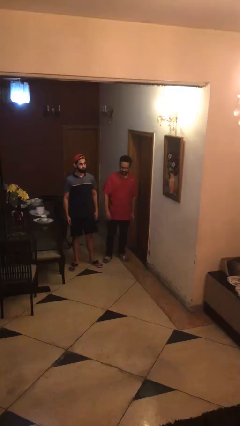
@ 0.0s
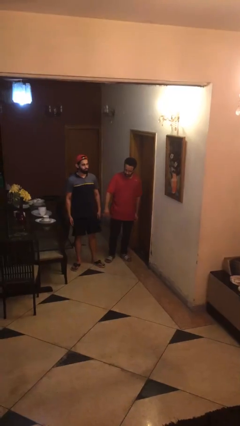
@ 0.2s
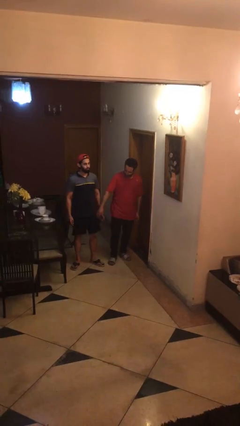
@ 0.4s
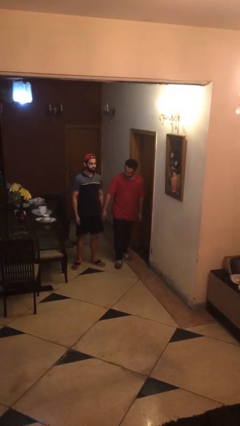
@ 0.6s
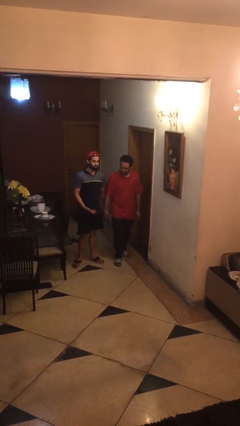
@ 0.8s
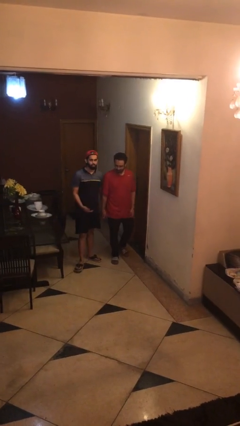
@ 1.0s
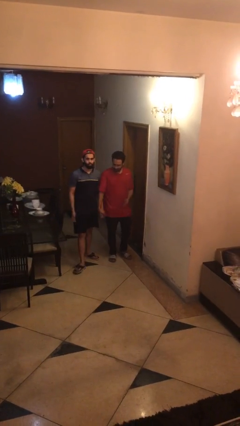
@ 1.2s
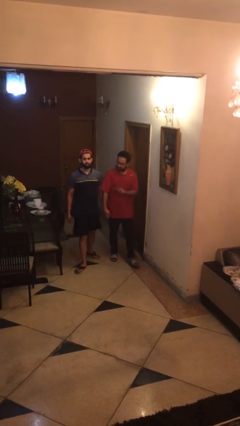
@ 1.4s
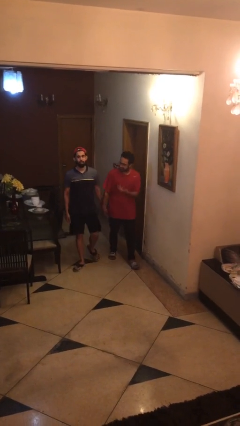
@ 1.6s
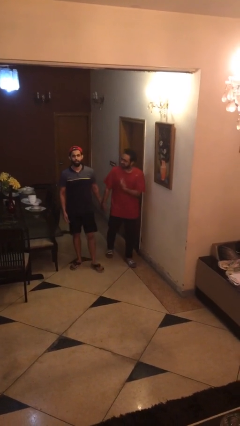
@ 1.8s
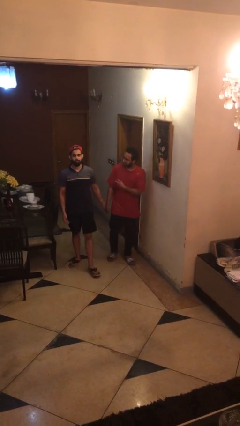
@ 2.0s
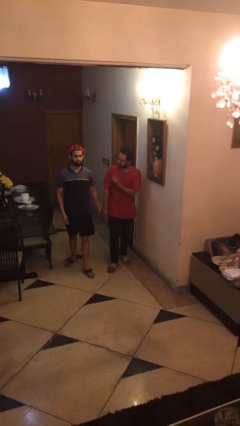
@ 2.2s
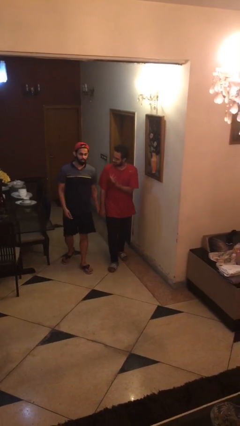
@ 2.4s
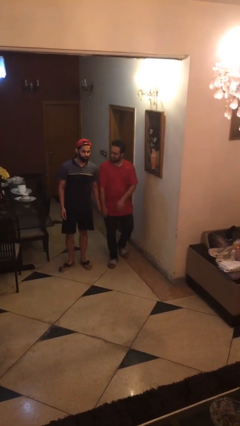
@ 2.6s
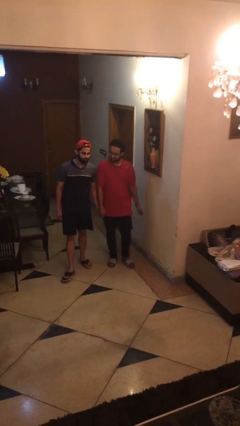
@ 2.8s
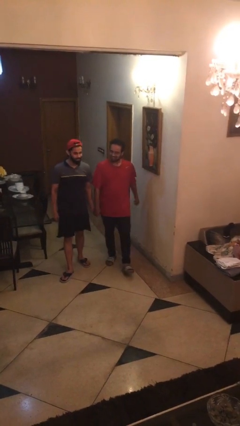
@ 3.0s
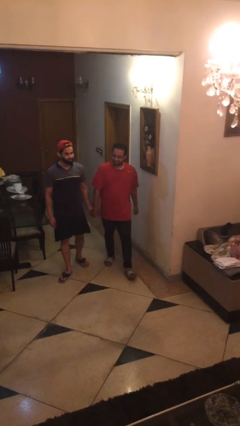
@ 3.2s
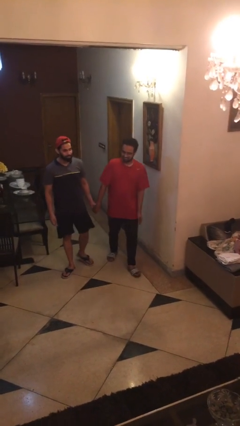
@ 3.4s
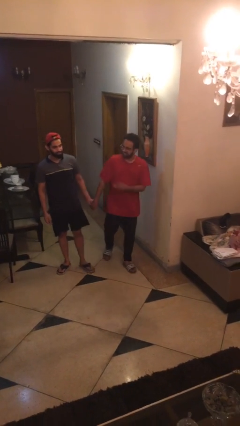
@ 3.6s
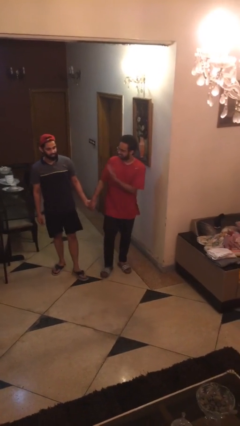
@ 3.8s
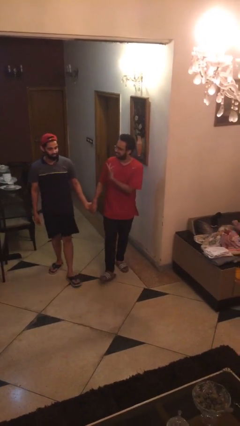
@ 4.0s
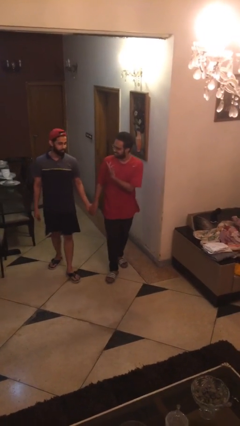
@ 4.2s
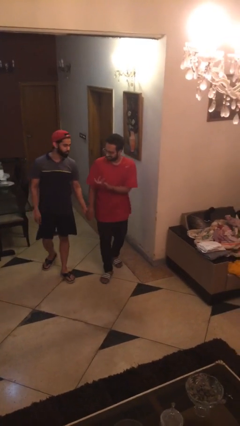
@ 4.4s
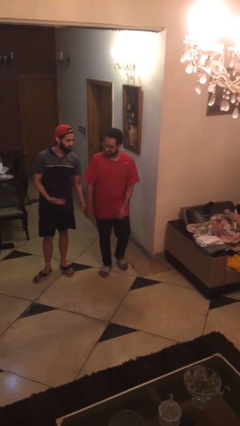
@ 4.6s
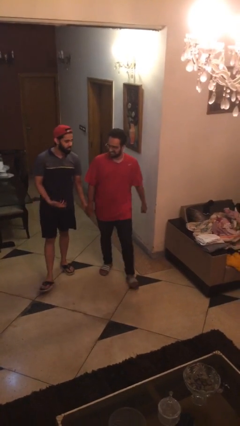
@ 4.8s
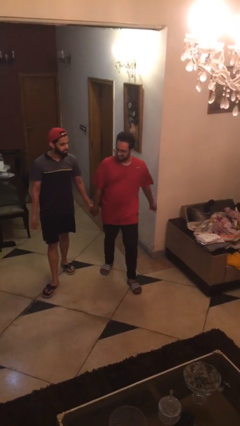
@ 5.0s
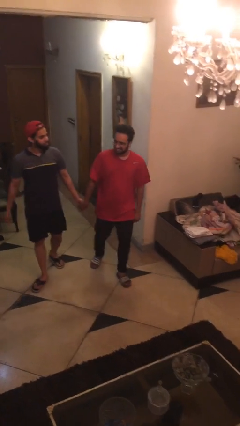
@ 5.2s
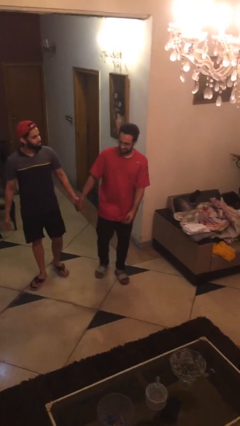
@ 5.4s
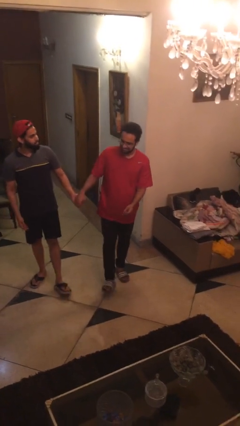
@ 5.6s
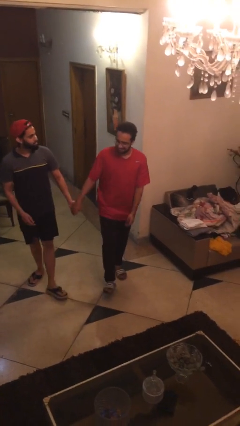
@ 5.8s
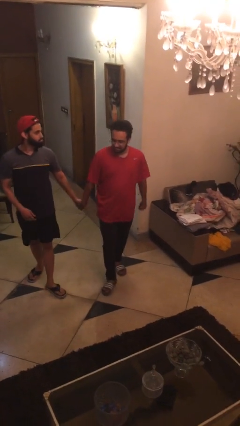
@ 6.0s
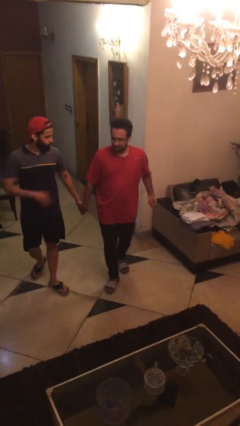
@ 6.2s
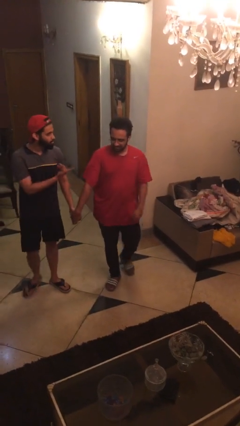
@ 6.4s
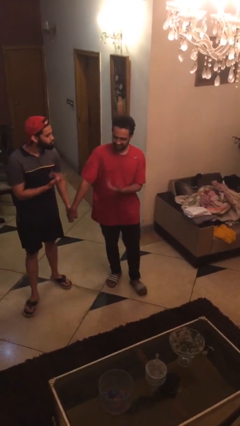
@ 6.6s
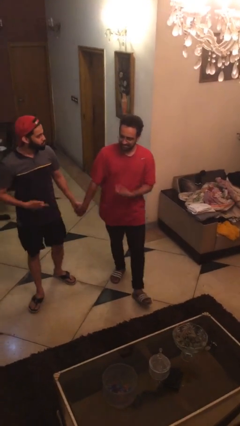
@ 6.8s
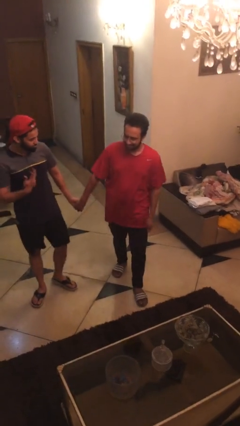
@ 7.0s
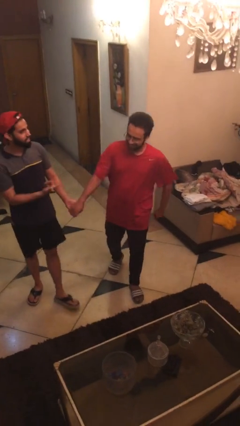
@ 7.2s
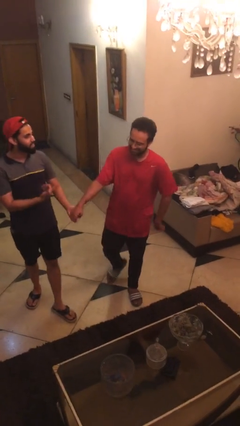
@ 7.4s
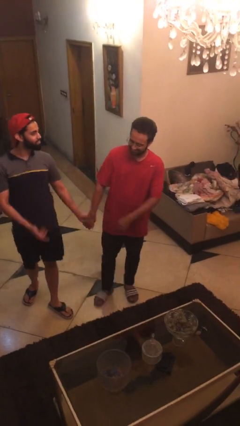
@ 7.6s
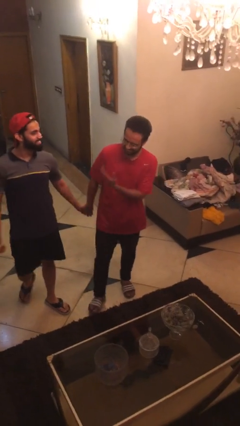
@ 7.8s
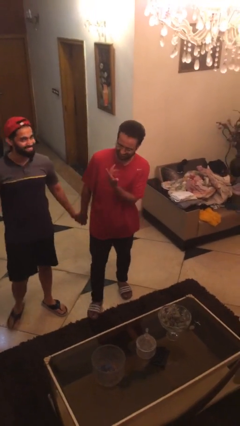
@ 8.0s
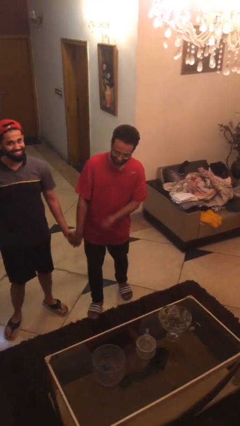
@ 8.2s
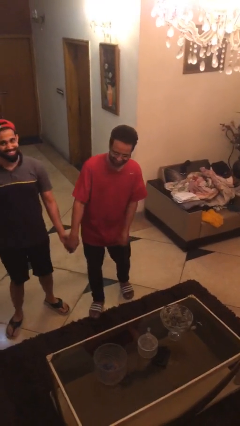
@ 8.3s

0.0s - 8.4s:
person holds hand

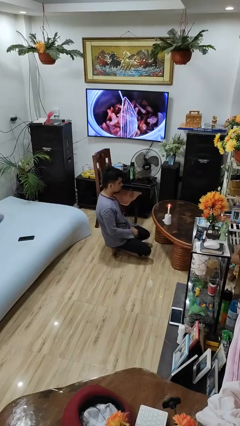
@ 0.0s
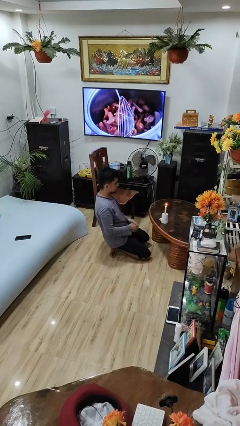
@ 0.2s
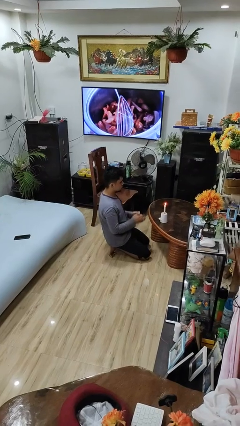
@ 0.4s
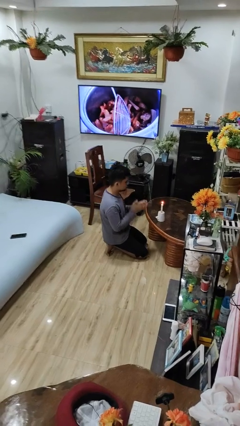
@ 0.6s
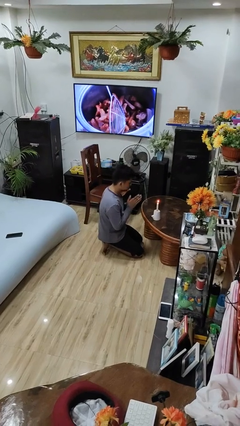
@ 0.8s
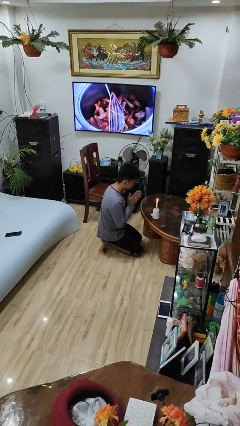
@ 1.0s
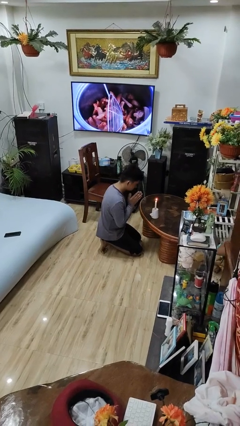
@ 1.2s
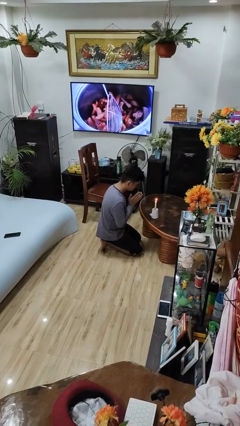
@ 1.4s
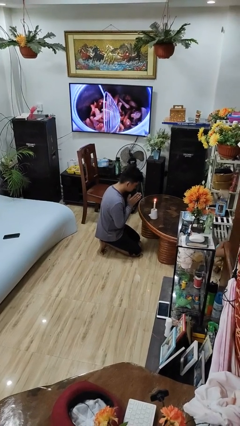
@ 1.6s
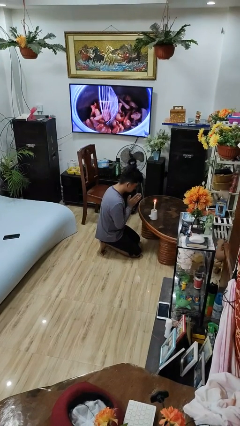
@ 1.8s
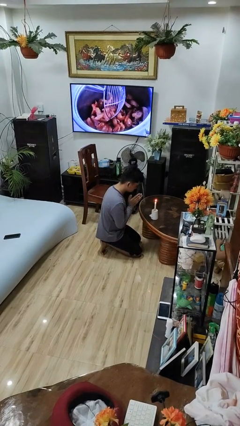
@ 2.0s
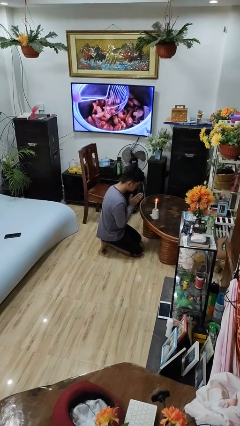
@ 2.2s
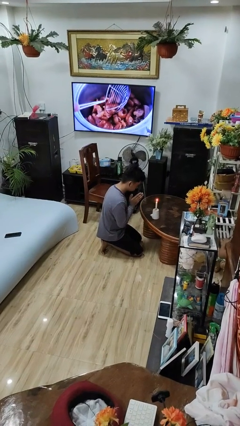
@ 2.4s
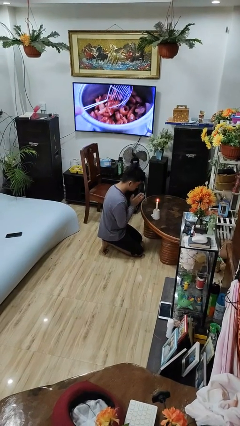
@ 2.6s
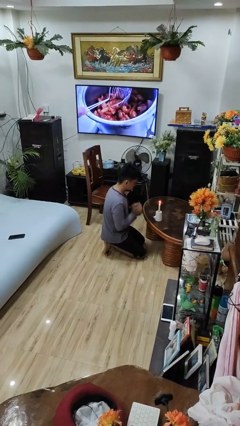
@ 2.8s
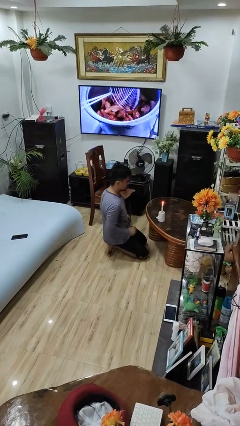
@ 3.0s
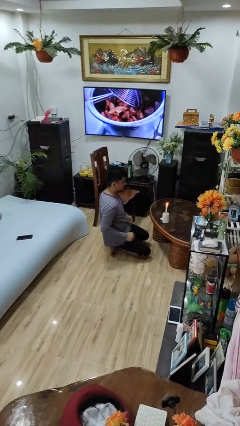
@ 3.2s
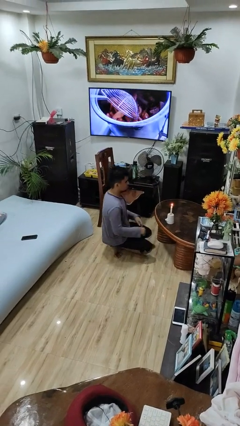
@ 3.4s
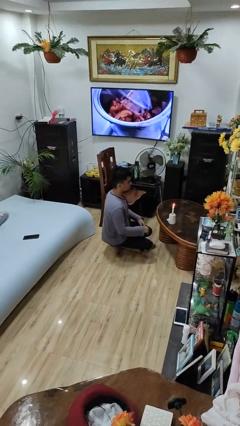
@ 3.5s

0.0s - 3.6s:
person prays

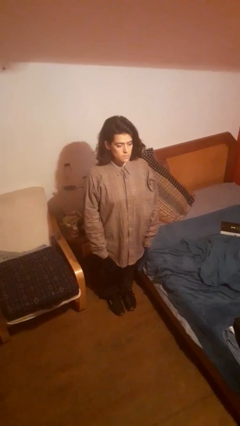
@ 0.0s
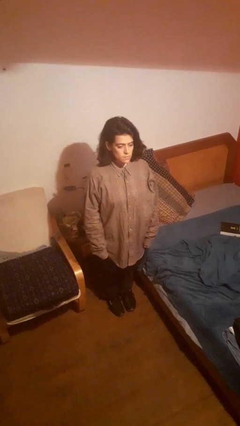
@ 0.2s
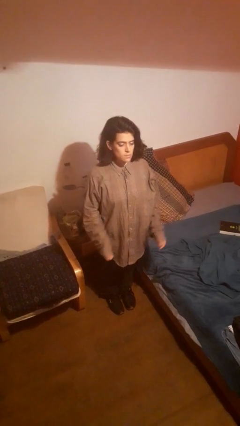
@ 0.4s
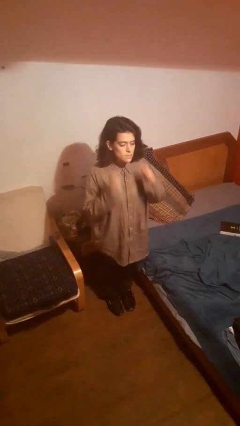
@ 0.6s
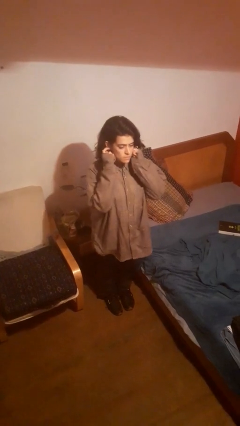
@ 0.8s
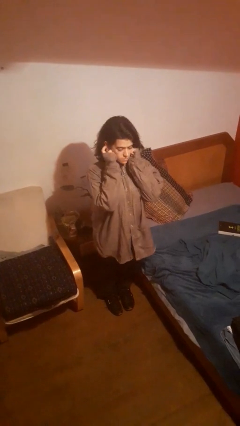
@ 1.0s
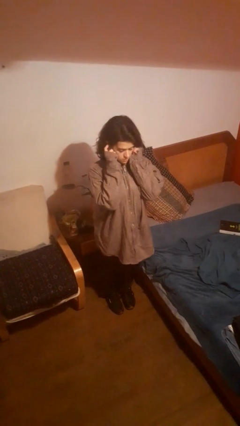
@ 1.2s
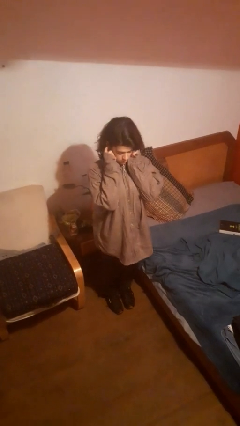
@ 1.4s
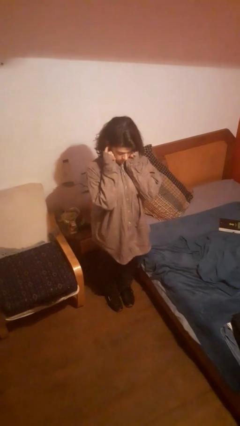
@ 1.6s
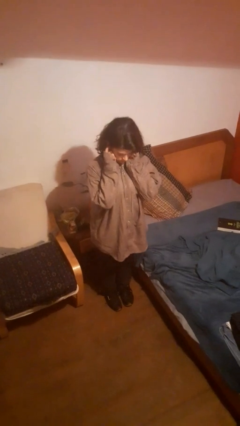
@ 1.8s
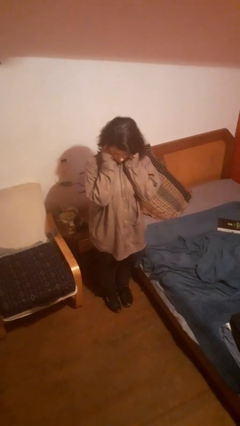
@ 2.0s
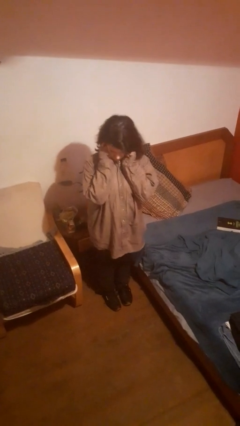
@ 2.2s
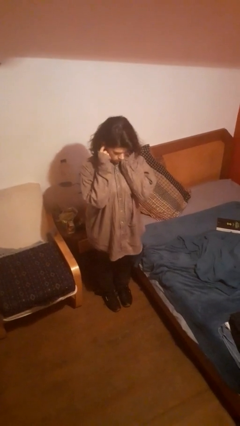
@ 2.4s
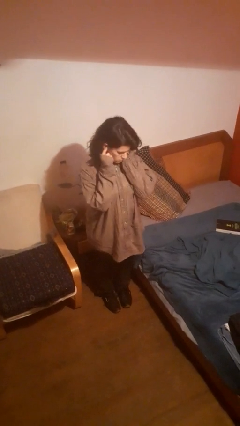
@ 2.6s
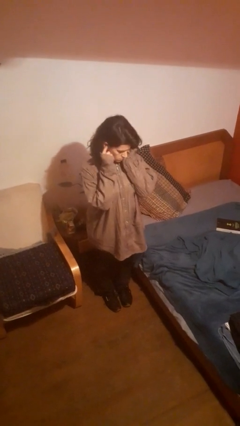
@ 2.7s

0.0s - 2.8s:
person puts fingers in ear

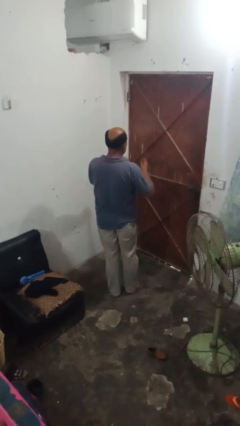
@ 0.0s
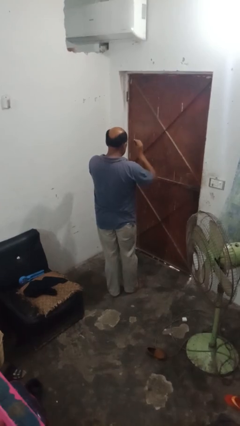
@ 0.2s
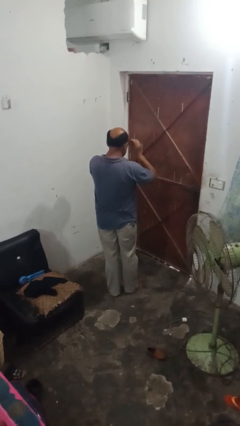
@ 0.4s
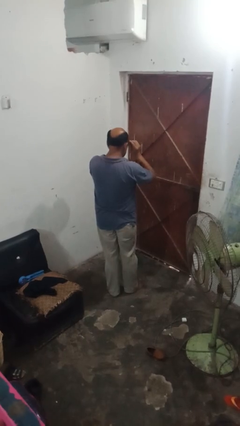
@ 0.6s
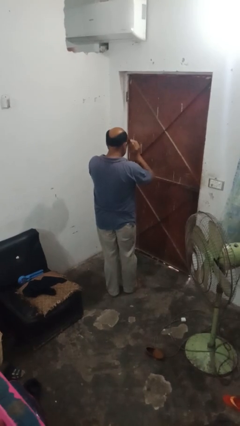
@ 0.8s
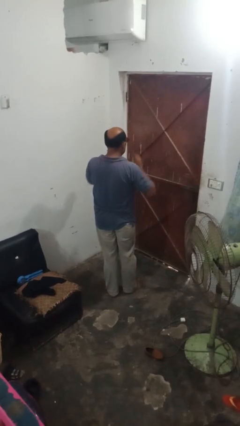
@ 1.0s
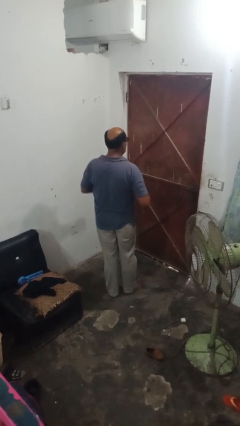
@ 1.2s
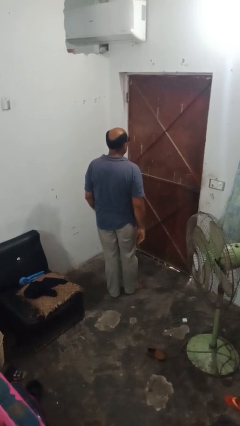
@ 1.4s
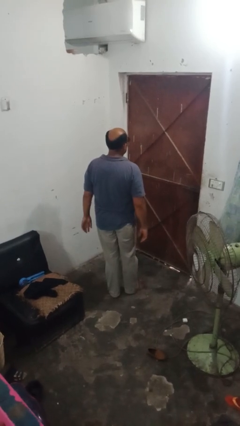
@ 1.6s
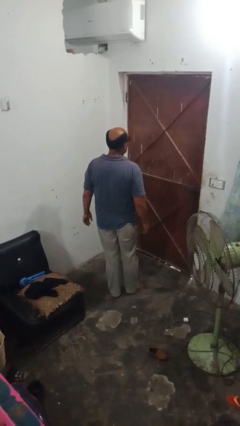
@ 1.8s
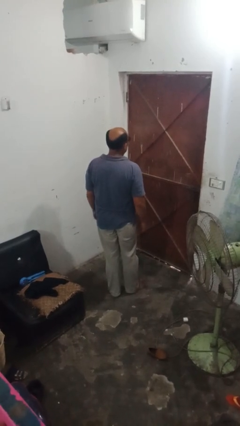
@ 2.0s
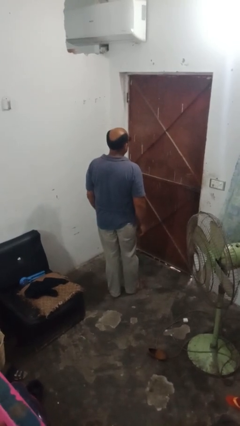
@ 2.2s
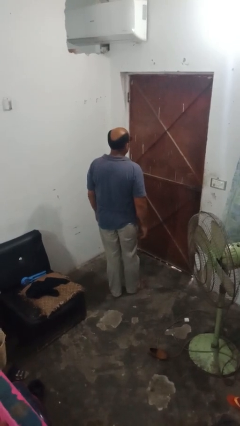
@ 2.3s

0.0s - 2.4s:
person puts on sunglasses

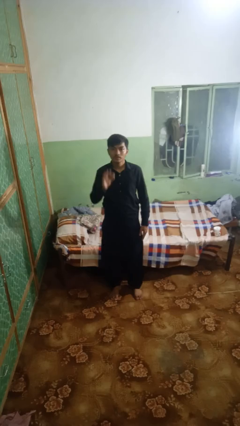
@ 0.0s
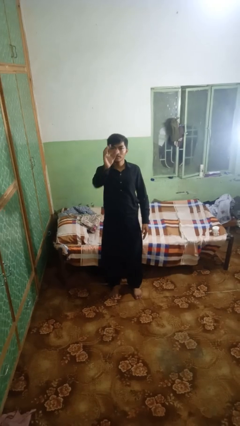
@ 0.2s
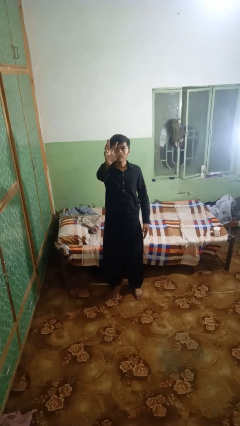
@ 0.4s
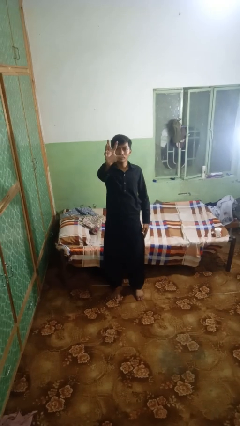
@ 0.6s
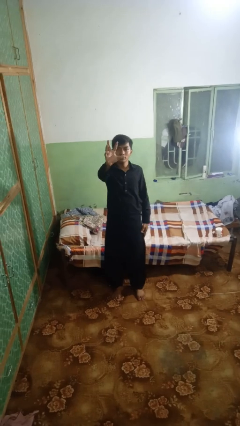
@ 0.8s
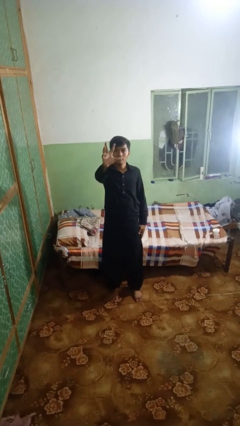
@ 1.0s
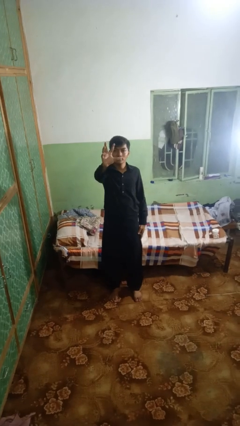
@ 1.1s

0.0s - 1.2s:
person gestures zoom in
